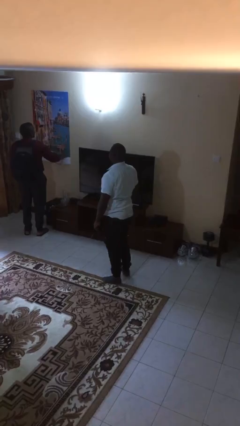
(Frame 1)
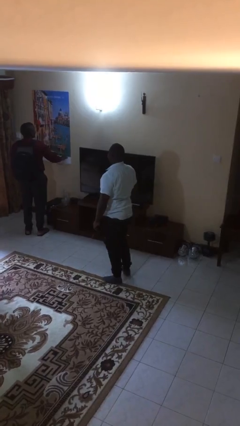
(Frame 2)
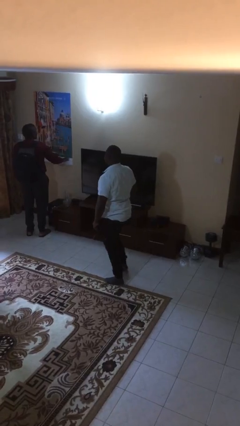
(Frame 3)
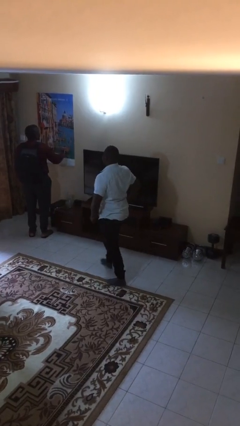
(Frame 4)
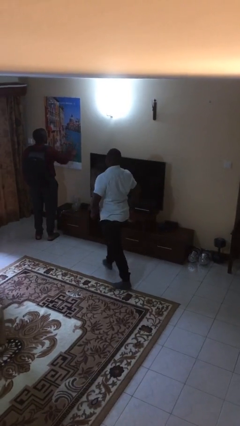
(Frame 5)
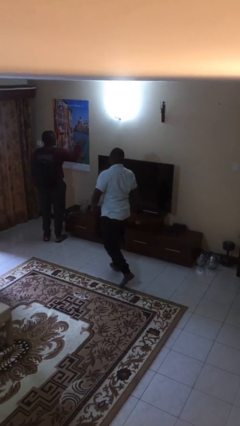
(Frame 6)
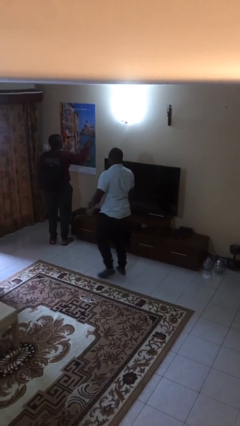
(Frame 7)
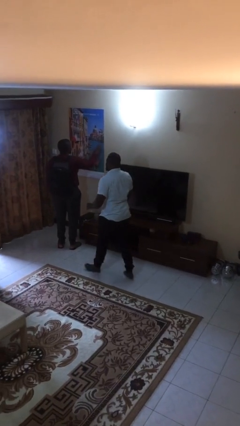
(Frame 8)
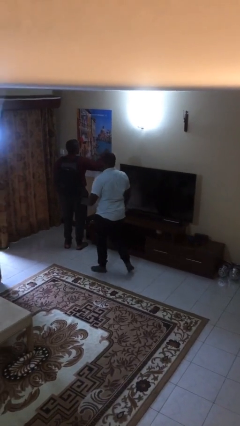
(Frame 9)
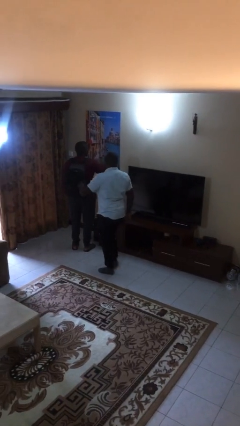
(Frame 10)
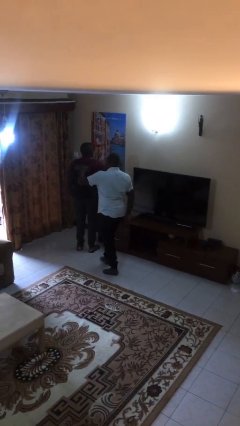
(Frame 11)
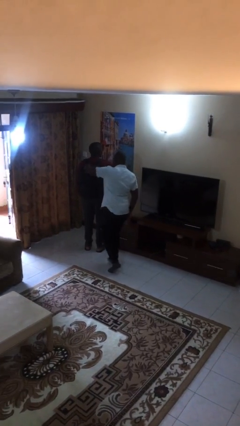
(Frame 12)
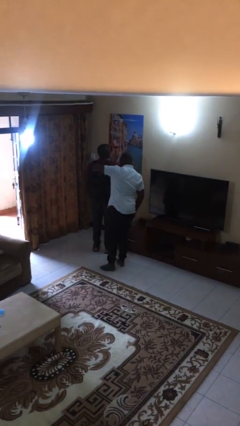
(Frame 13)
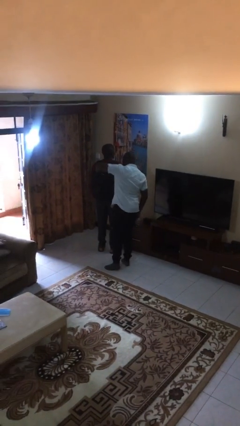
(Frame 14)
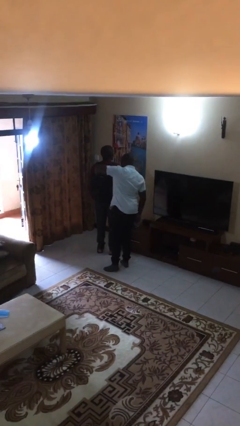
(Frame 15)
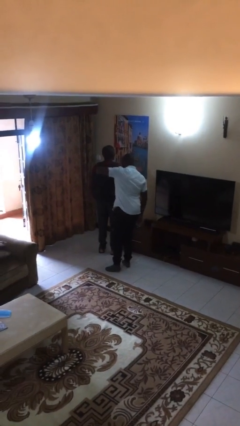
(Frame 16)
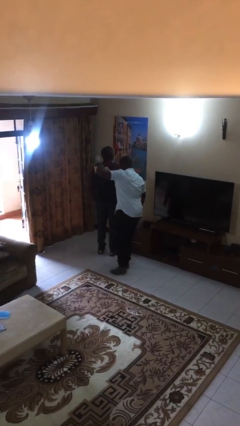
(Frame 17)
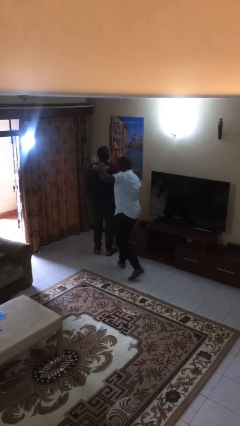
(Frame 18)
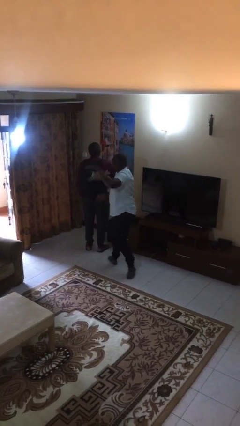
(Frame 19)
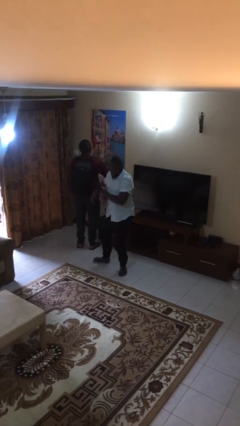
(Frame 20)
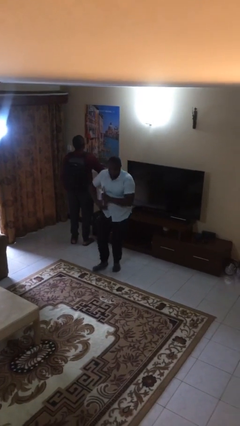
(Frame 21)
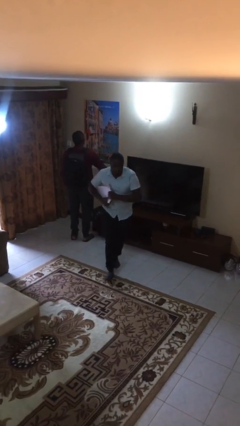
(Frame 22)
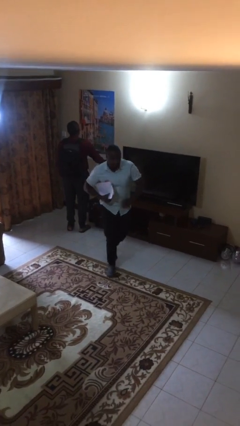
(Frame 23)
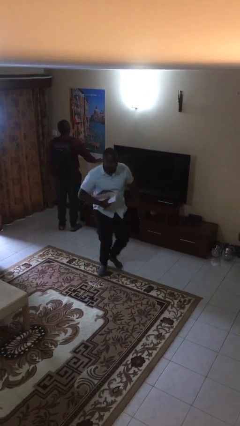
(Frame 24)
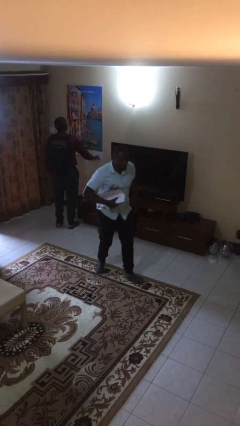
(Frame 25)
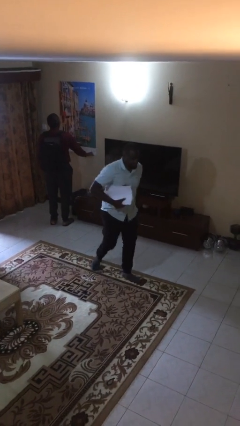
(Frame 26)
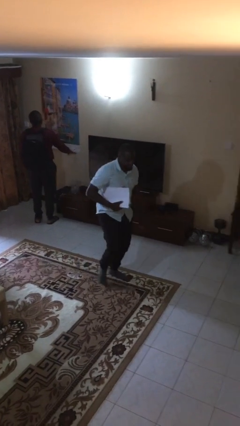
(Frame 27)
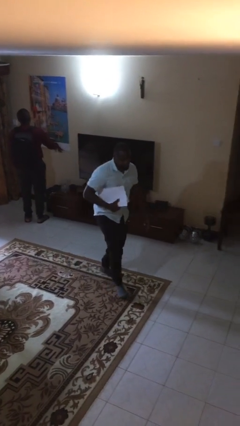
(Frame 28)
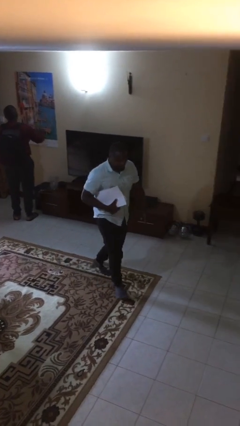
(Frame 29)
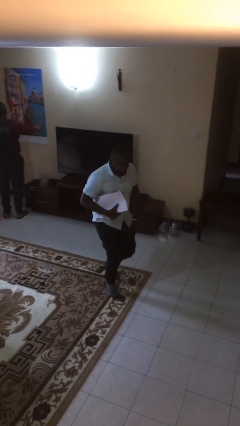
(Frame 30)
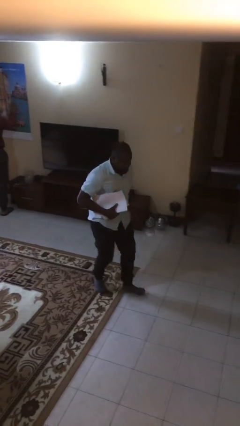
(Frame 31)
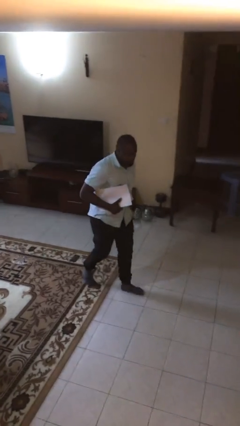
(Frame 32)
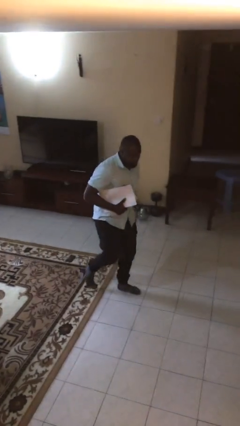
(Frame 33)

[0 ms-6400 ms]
person steals object from person

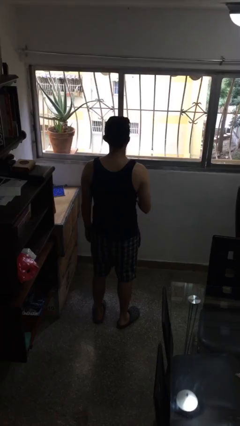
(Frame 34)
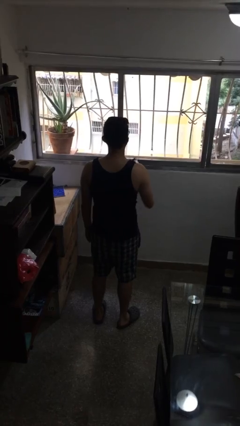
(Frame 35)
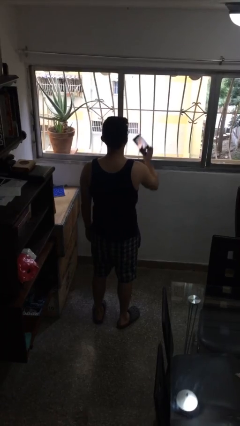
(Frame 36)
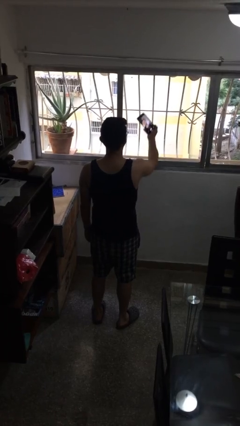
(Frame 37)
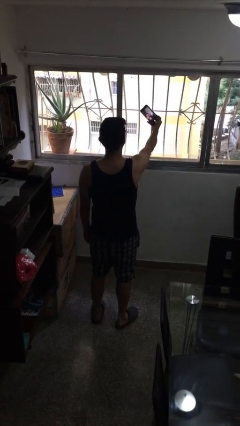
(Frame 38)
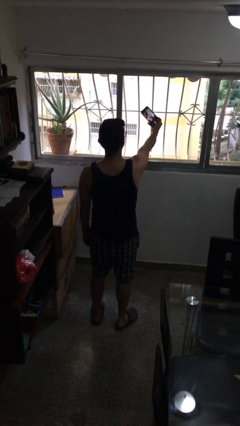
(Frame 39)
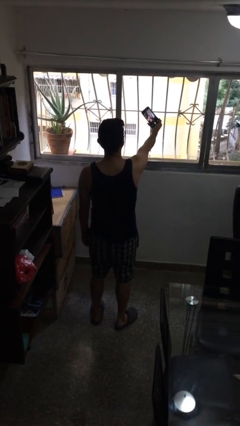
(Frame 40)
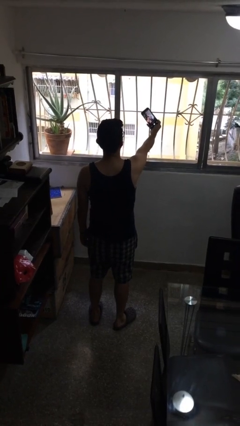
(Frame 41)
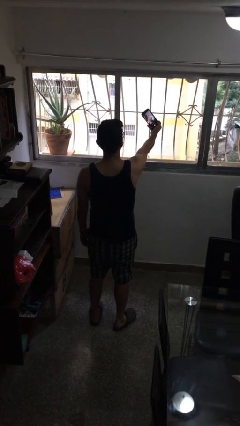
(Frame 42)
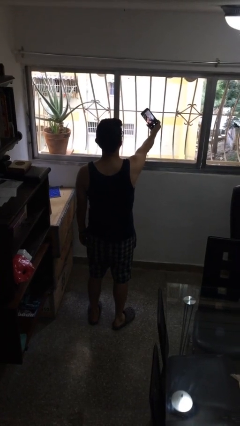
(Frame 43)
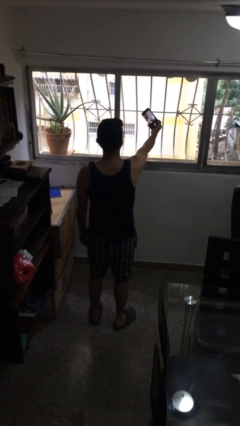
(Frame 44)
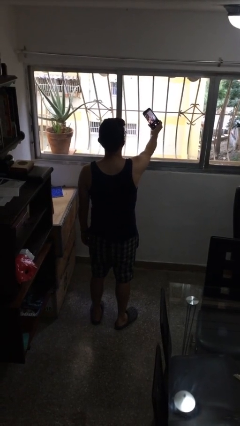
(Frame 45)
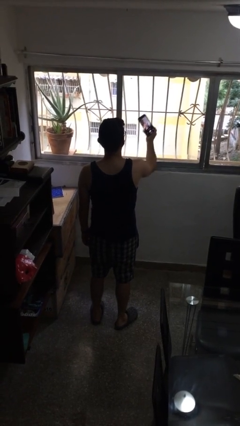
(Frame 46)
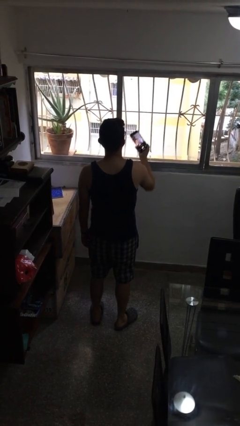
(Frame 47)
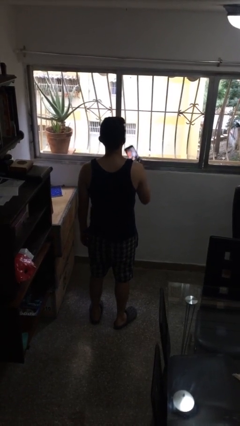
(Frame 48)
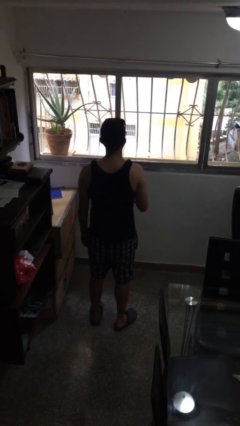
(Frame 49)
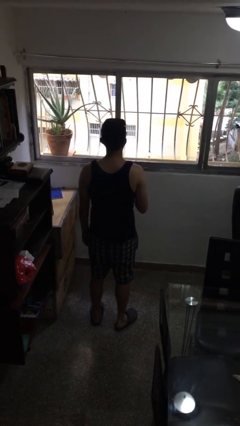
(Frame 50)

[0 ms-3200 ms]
person takes selfie

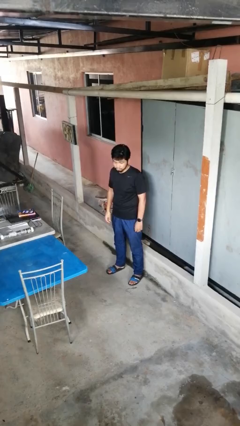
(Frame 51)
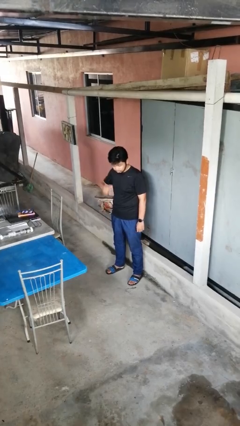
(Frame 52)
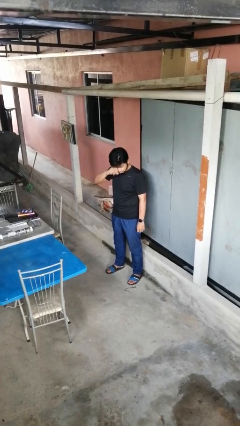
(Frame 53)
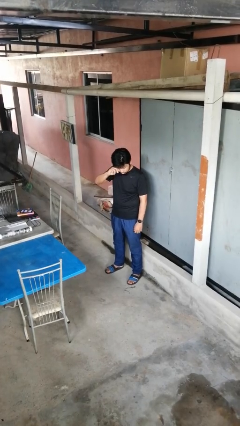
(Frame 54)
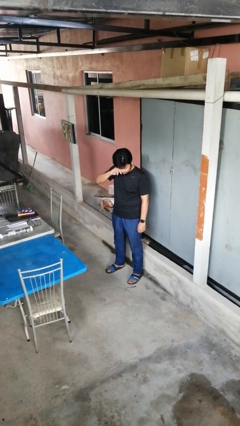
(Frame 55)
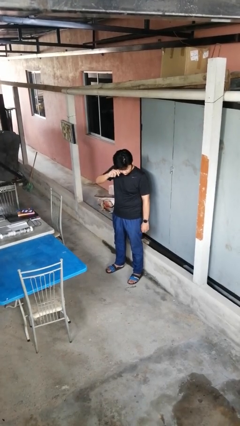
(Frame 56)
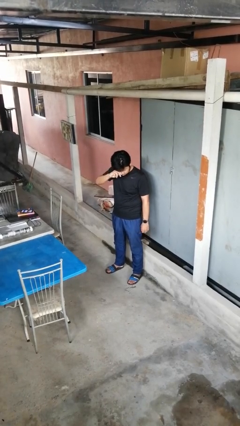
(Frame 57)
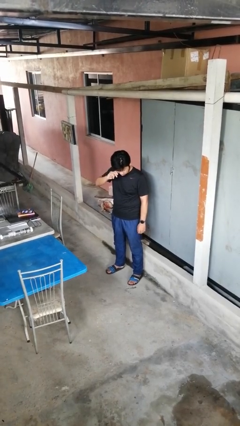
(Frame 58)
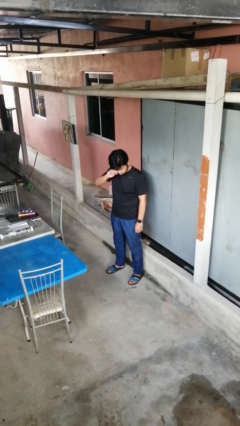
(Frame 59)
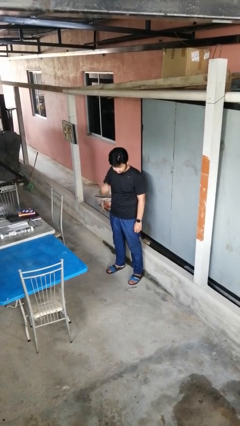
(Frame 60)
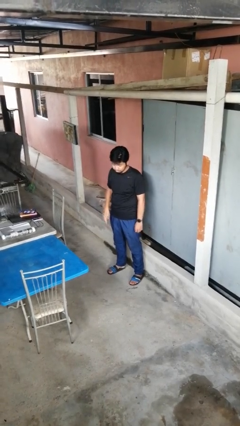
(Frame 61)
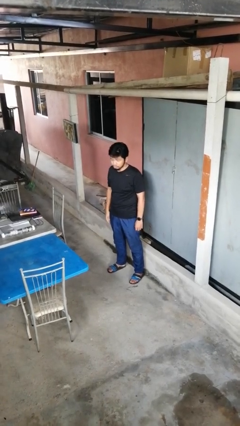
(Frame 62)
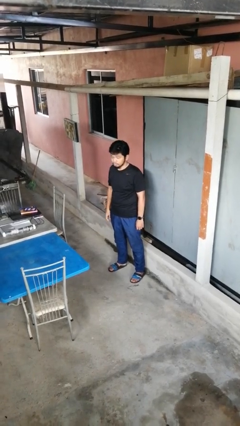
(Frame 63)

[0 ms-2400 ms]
person scratches face

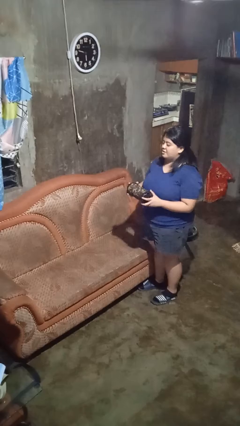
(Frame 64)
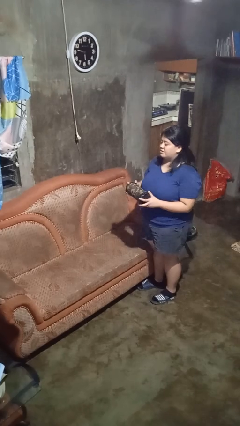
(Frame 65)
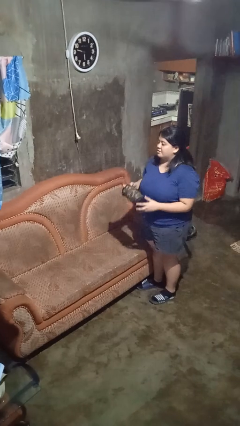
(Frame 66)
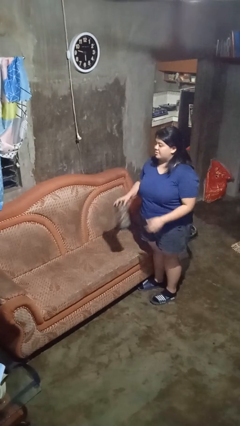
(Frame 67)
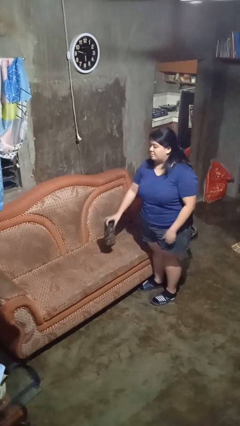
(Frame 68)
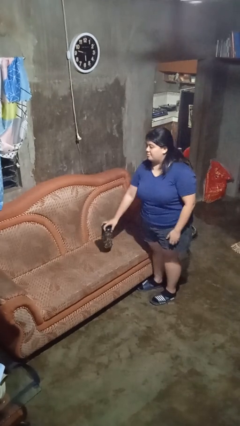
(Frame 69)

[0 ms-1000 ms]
person puts down object on couch

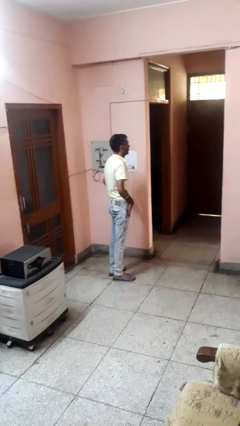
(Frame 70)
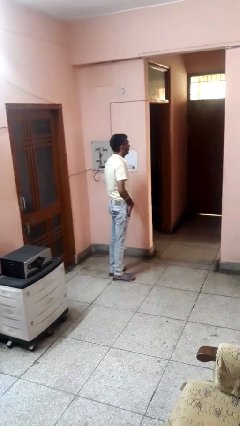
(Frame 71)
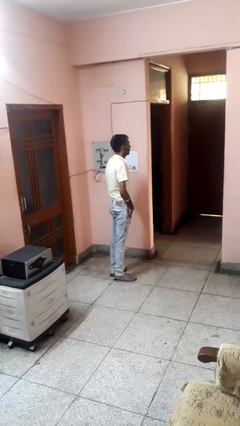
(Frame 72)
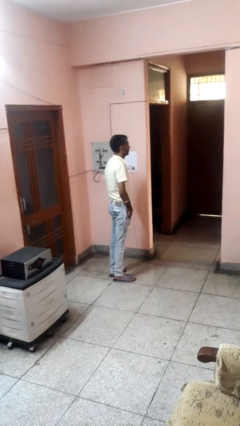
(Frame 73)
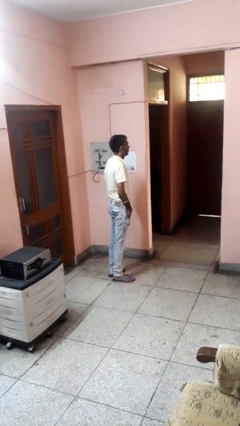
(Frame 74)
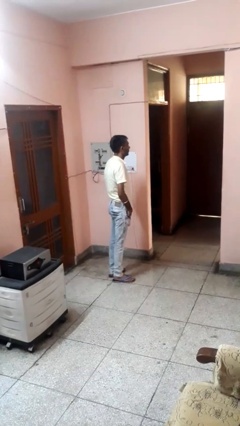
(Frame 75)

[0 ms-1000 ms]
person puts hands in back pockets

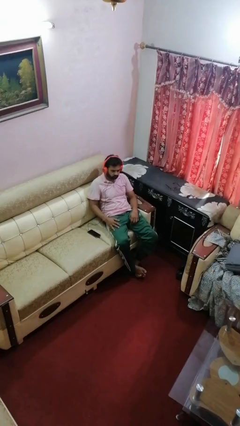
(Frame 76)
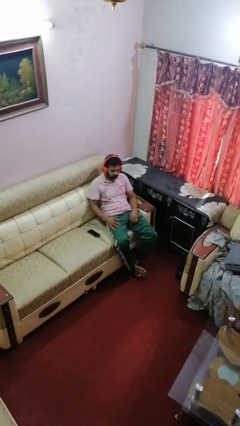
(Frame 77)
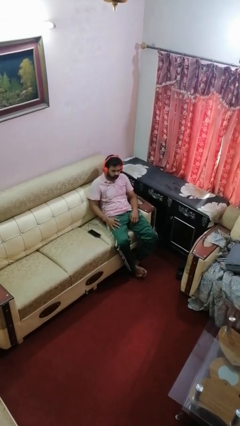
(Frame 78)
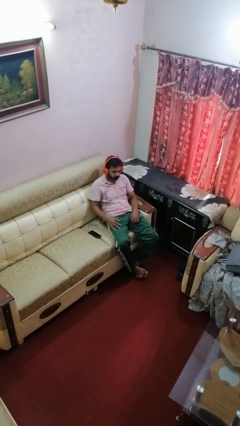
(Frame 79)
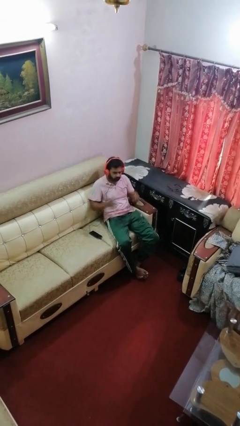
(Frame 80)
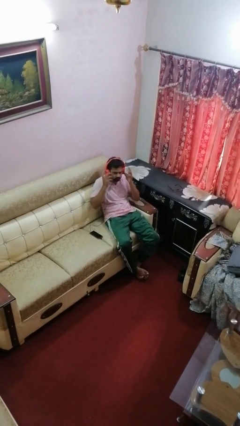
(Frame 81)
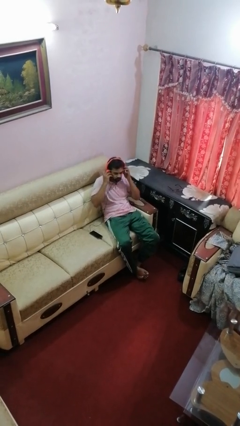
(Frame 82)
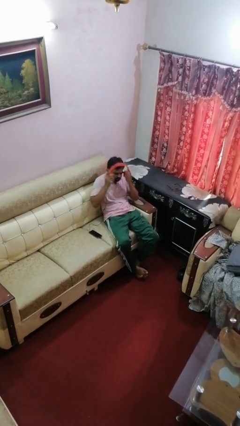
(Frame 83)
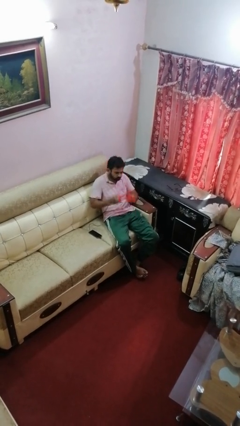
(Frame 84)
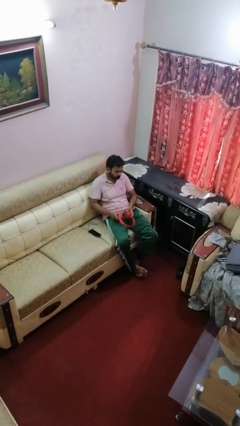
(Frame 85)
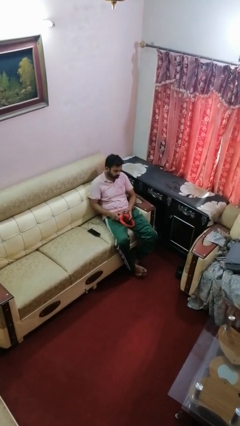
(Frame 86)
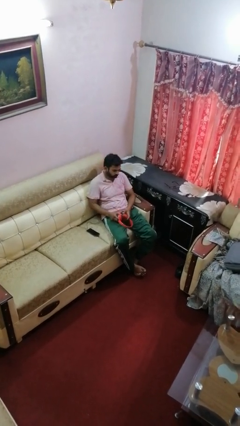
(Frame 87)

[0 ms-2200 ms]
person takes off headphones

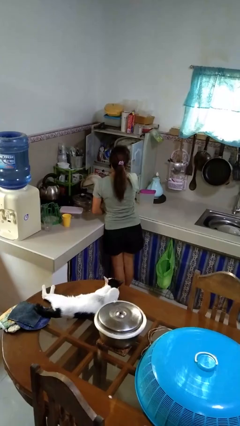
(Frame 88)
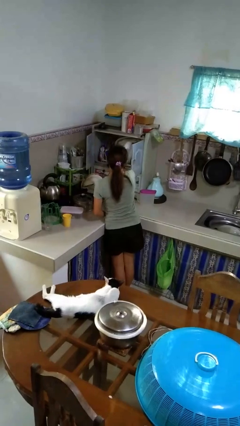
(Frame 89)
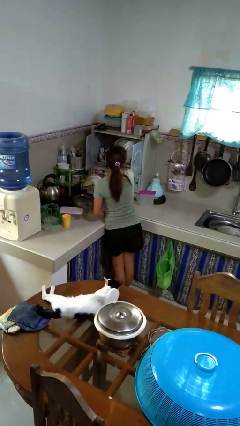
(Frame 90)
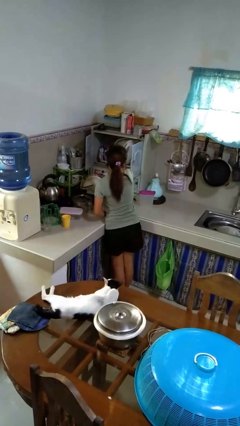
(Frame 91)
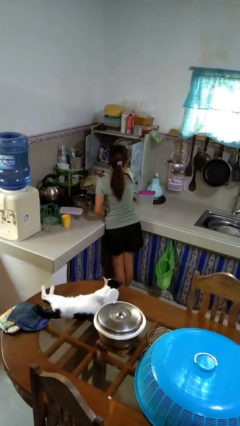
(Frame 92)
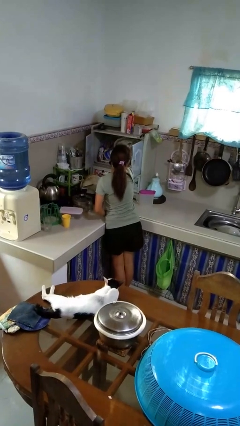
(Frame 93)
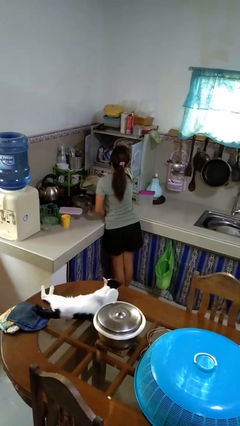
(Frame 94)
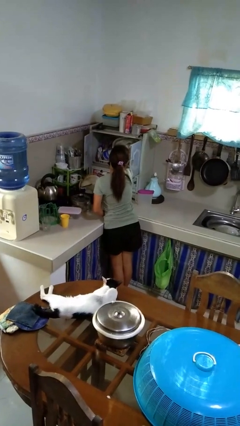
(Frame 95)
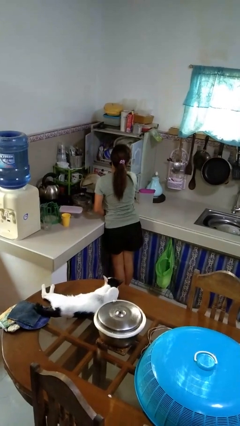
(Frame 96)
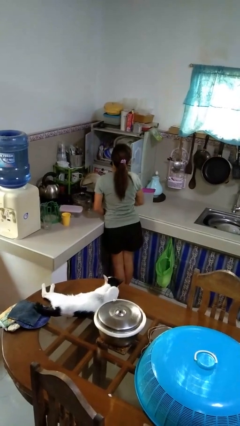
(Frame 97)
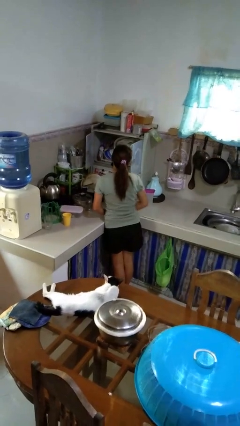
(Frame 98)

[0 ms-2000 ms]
person puts object into kitchen drawer
